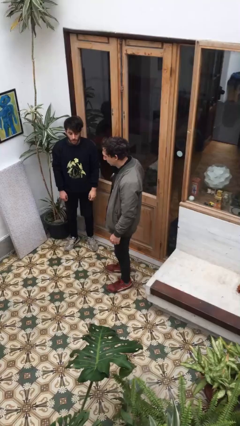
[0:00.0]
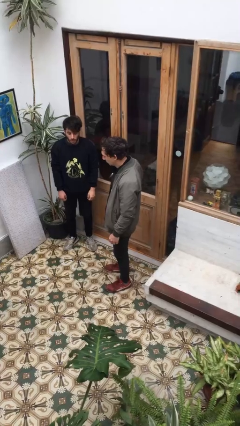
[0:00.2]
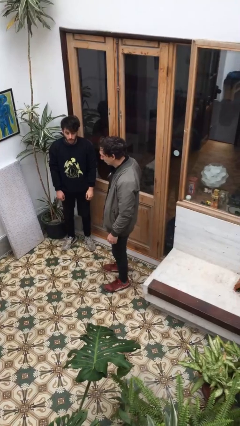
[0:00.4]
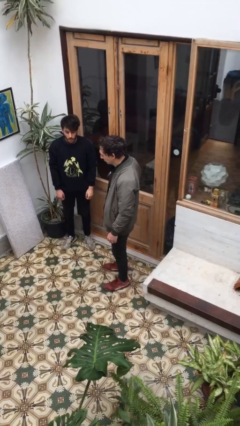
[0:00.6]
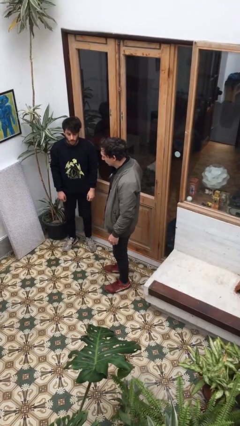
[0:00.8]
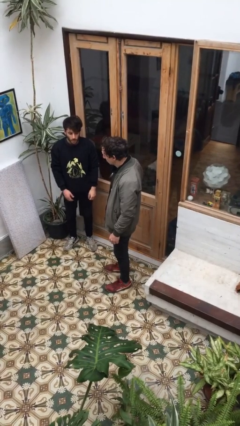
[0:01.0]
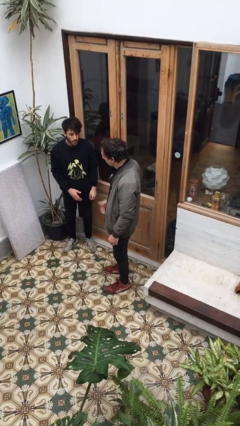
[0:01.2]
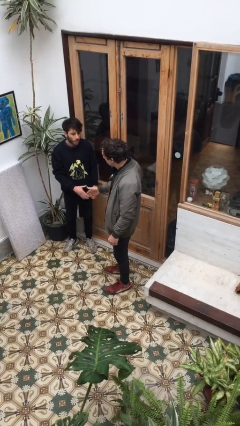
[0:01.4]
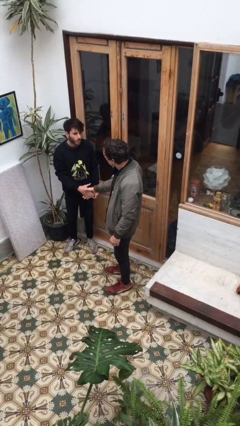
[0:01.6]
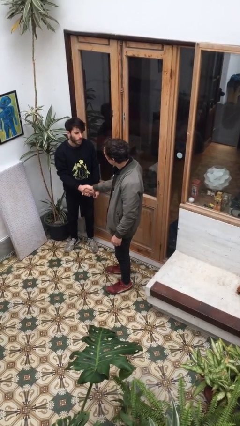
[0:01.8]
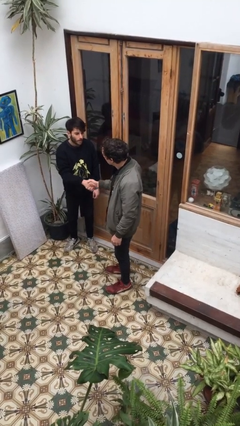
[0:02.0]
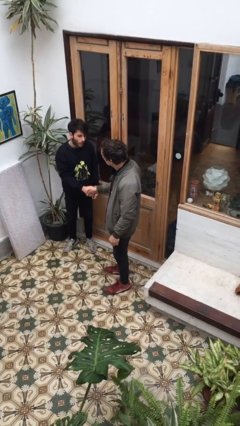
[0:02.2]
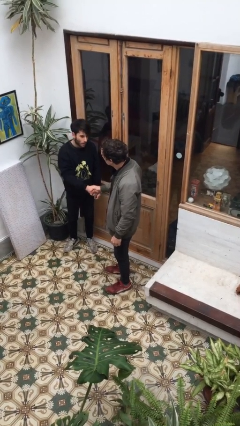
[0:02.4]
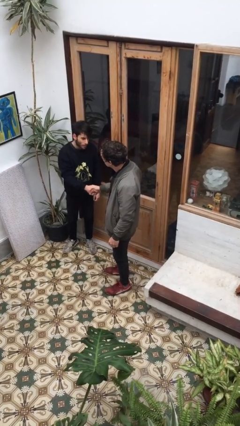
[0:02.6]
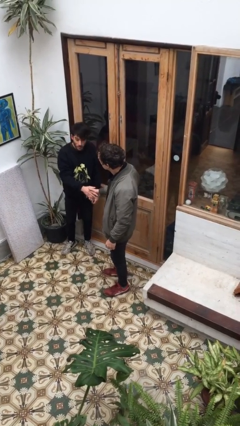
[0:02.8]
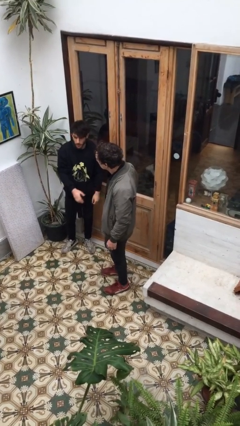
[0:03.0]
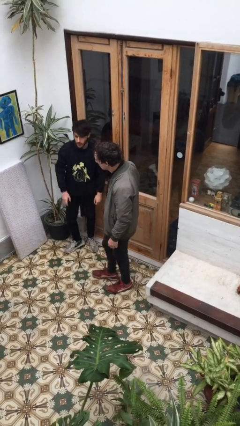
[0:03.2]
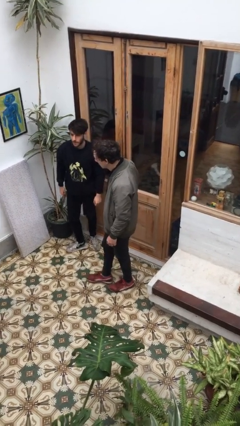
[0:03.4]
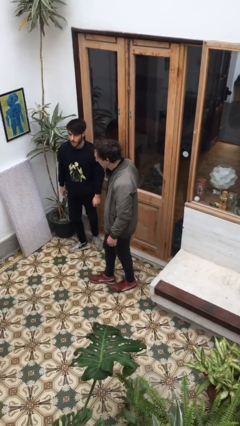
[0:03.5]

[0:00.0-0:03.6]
person shakes hand

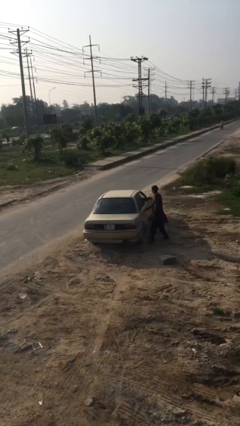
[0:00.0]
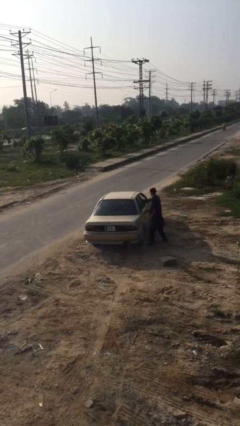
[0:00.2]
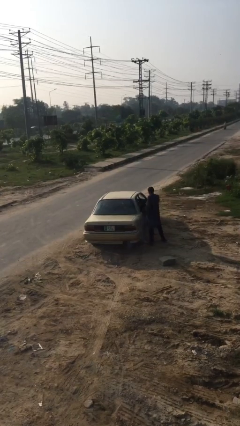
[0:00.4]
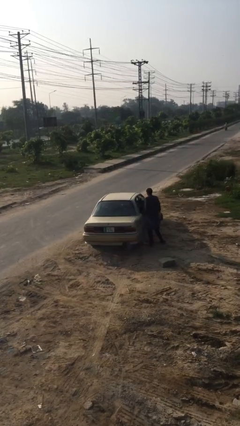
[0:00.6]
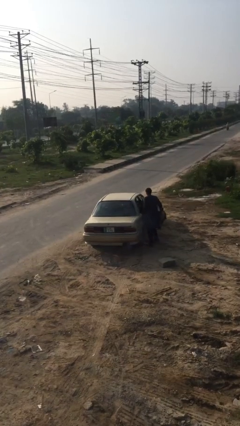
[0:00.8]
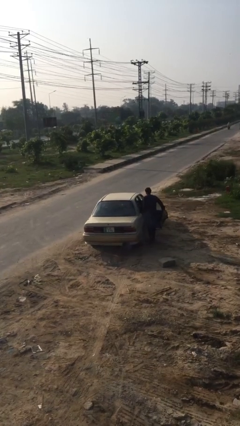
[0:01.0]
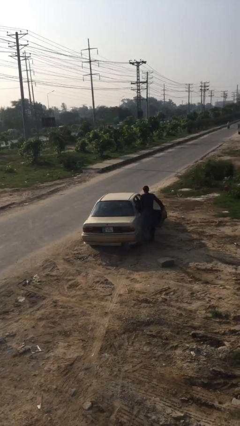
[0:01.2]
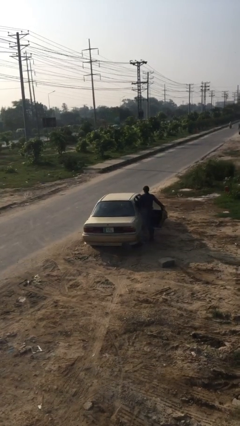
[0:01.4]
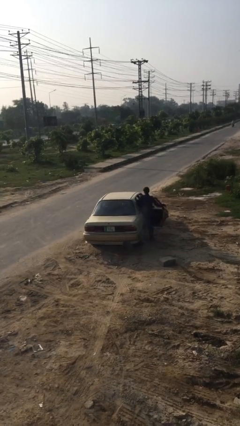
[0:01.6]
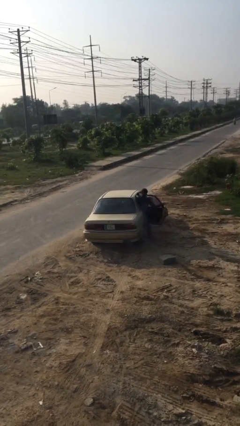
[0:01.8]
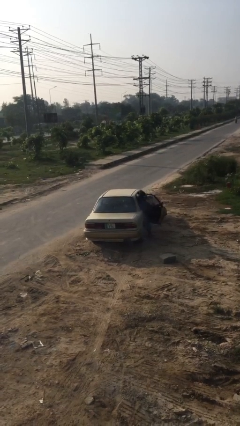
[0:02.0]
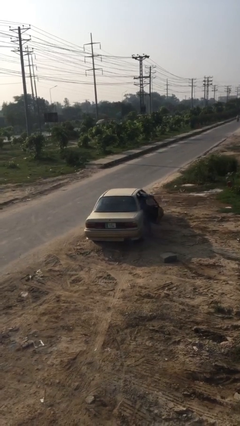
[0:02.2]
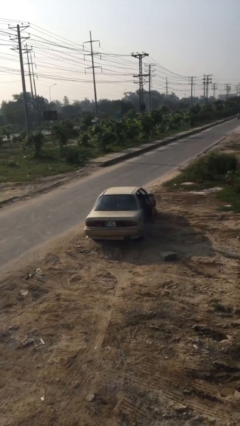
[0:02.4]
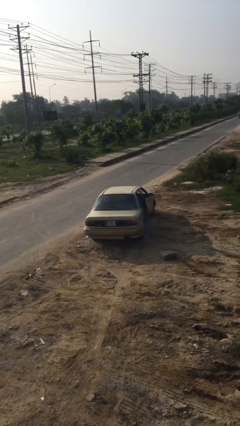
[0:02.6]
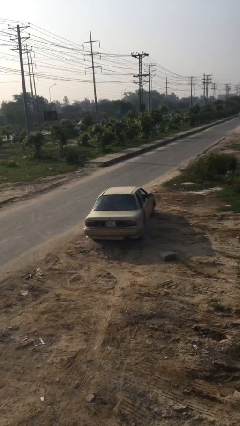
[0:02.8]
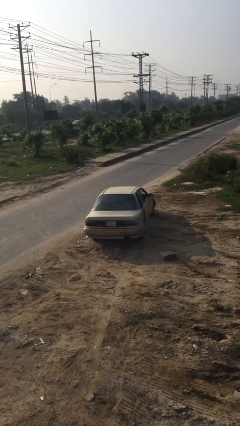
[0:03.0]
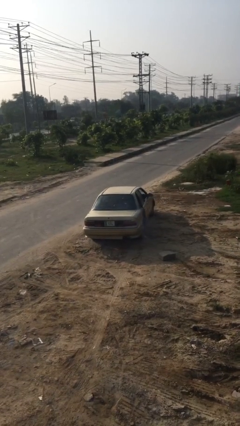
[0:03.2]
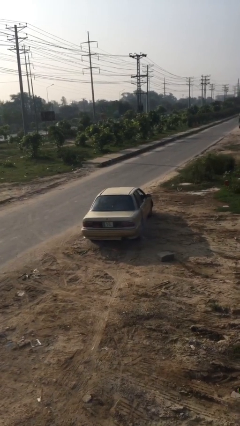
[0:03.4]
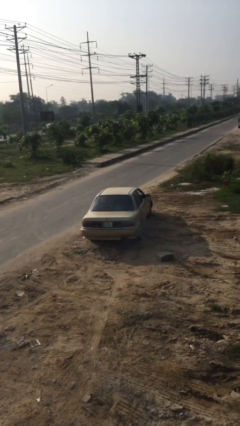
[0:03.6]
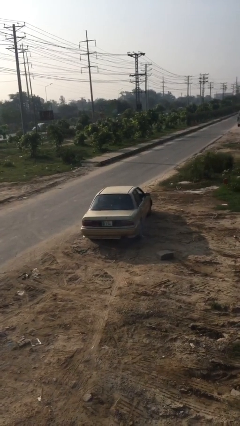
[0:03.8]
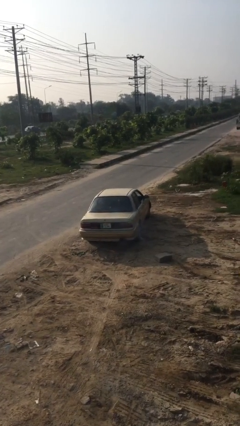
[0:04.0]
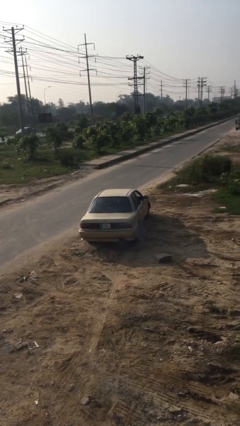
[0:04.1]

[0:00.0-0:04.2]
car picks up person

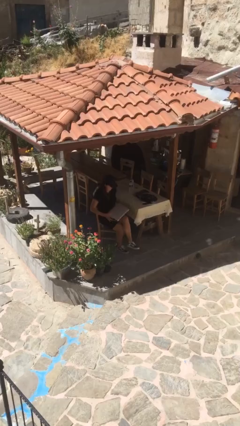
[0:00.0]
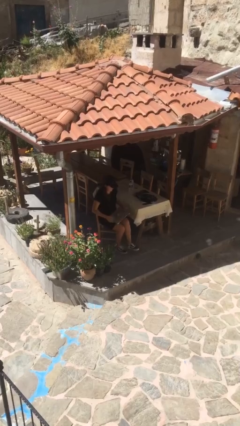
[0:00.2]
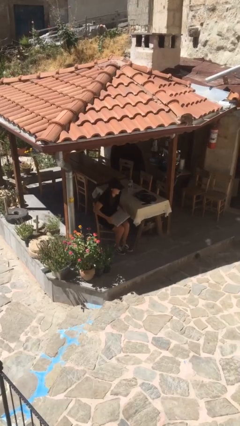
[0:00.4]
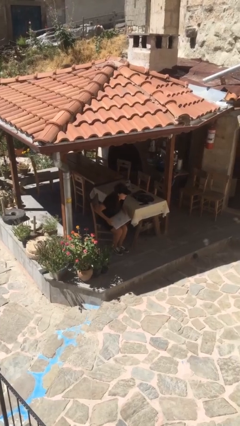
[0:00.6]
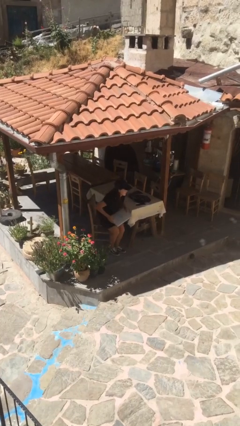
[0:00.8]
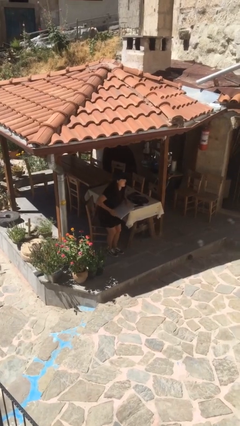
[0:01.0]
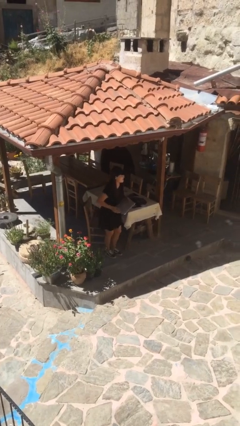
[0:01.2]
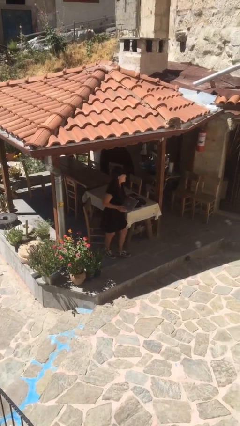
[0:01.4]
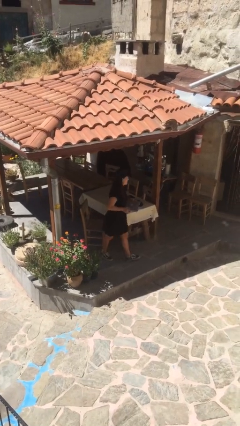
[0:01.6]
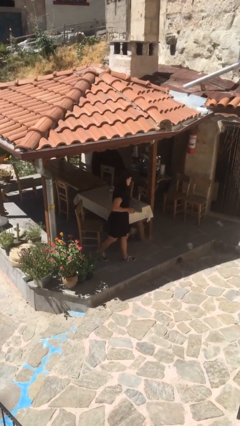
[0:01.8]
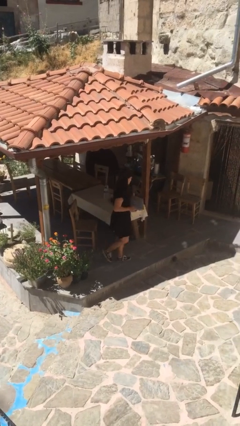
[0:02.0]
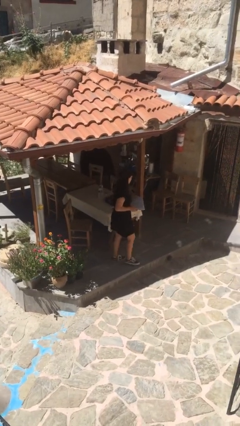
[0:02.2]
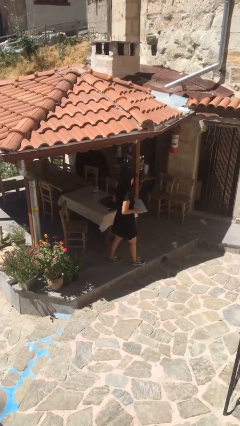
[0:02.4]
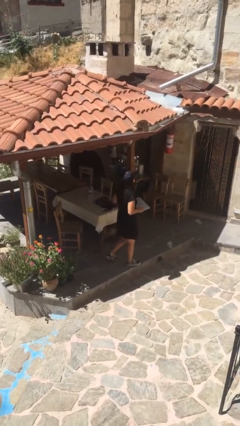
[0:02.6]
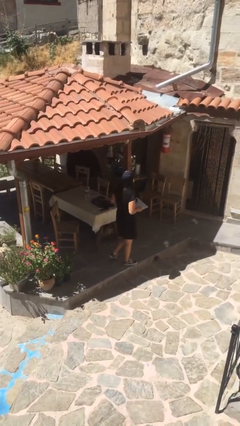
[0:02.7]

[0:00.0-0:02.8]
person stands up

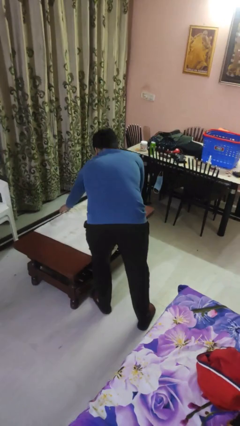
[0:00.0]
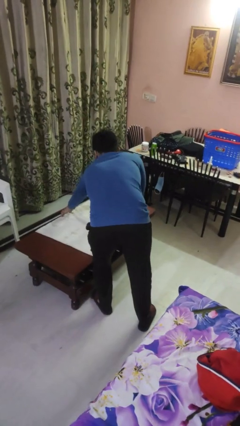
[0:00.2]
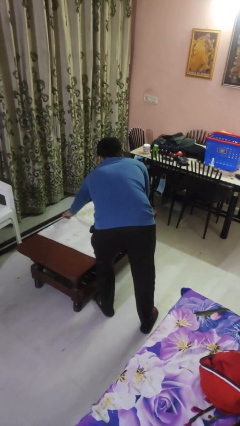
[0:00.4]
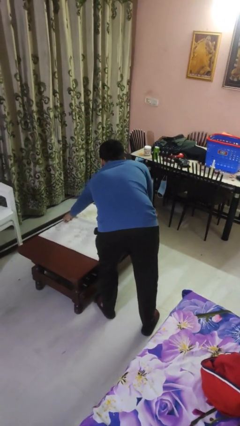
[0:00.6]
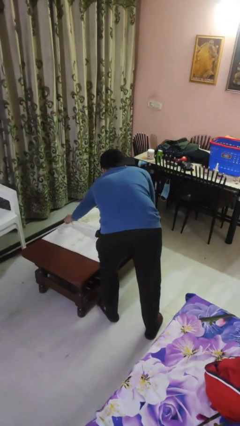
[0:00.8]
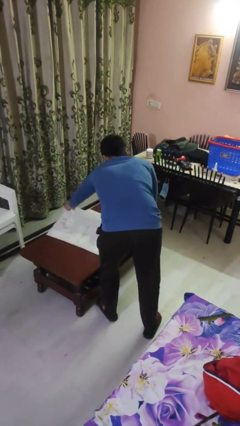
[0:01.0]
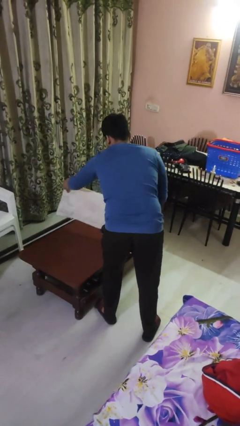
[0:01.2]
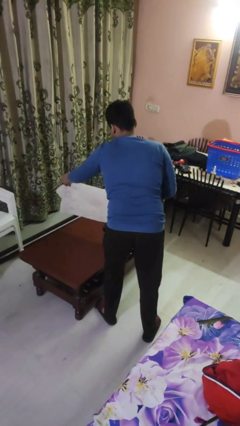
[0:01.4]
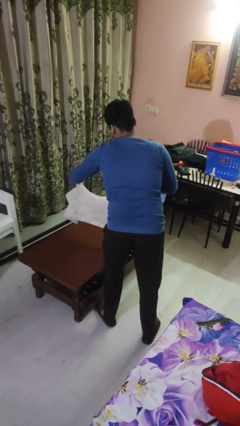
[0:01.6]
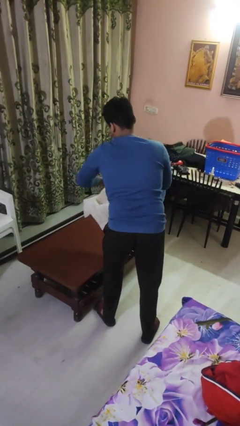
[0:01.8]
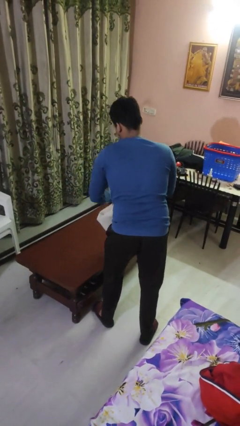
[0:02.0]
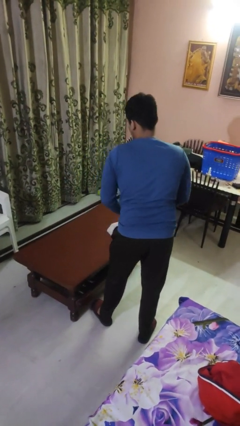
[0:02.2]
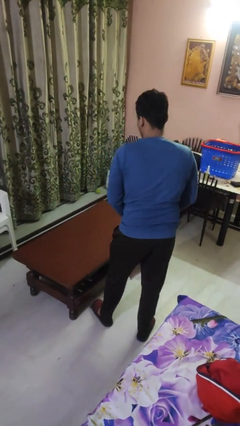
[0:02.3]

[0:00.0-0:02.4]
person folds tablecloth

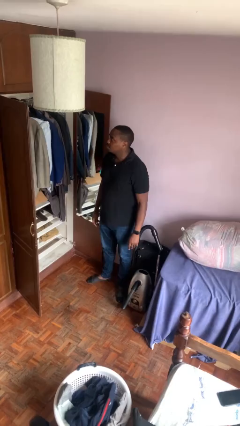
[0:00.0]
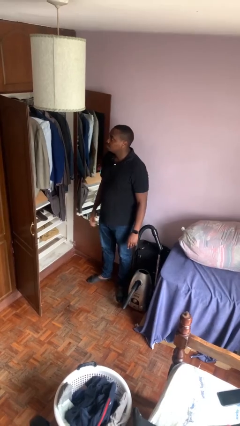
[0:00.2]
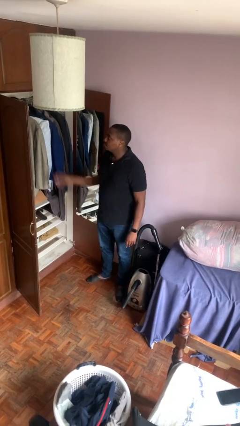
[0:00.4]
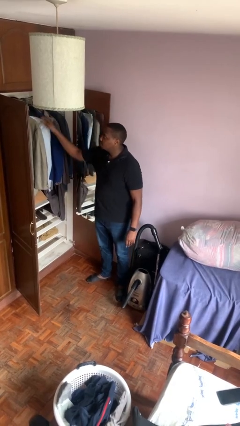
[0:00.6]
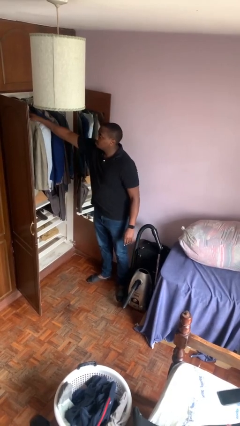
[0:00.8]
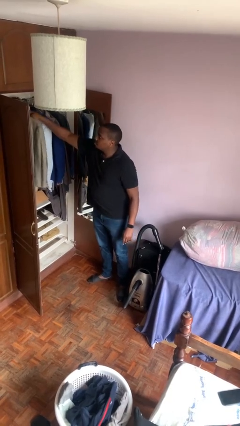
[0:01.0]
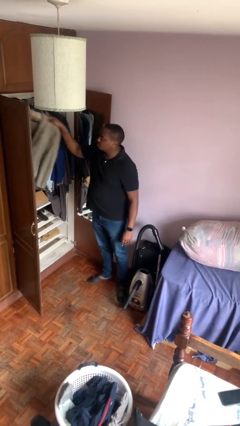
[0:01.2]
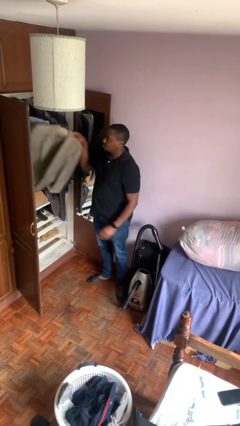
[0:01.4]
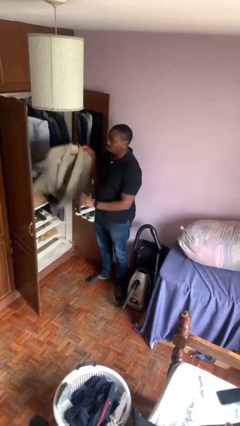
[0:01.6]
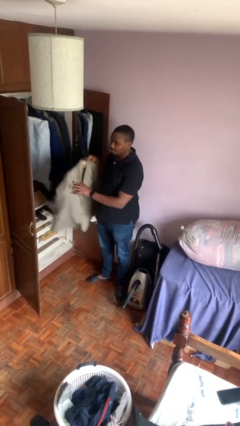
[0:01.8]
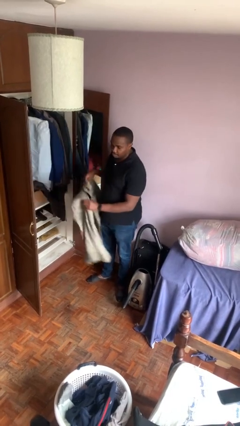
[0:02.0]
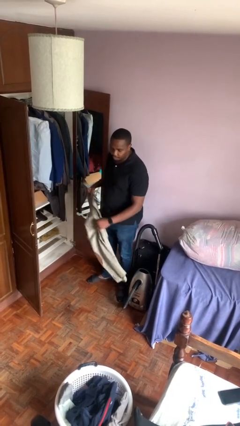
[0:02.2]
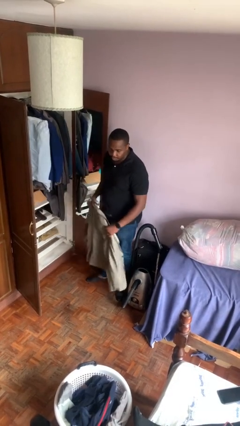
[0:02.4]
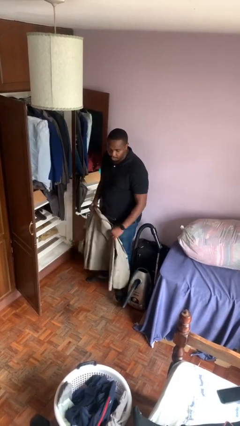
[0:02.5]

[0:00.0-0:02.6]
person takes clothes from closet

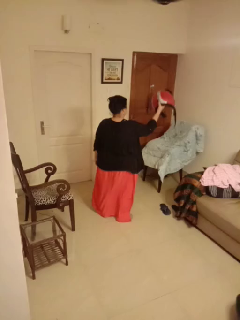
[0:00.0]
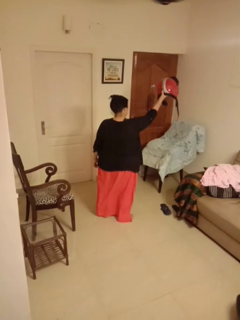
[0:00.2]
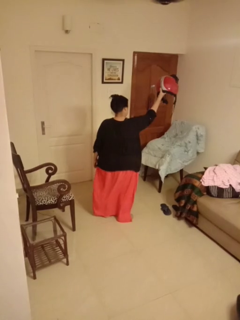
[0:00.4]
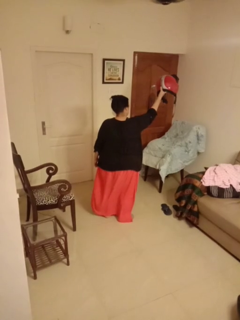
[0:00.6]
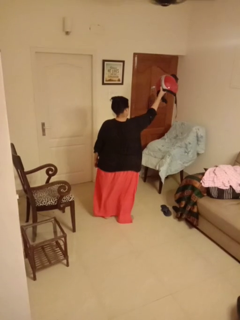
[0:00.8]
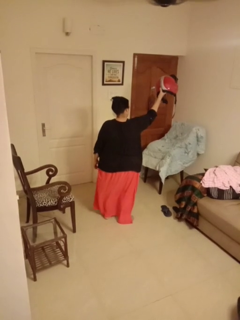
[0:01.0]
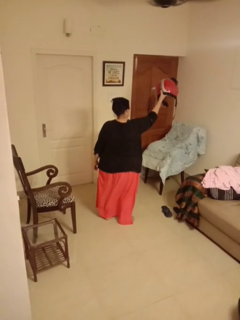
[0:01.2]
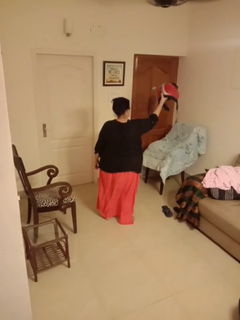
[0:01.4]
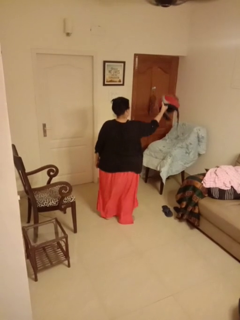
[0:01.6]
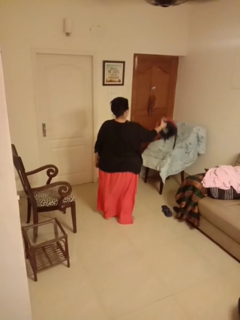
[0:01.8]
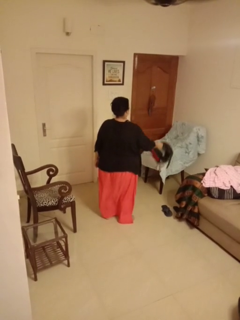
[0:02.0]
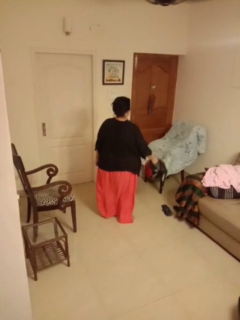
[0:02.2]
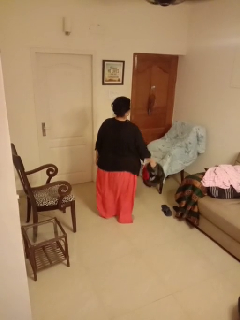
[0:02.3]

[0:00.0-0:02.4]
person holds object above head

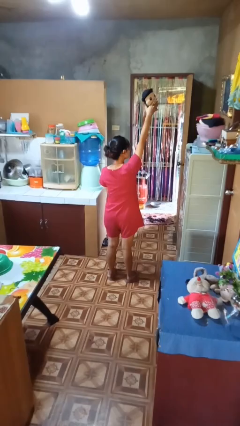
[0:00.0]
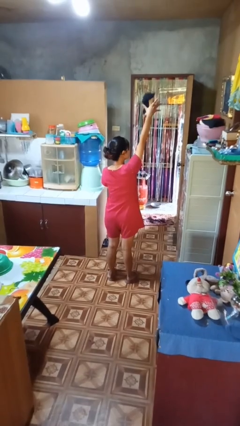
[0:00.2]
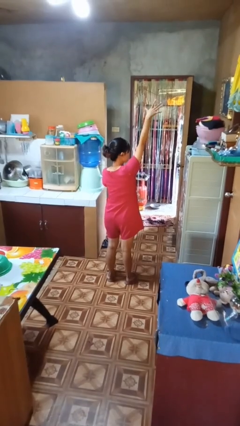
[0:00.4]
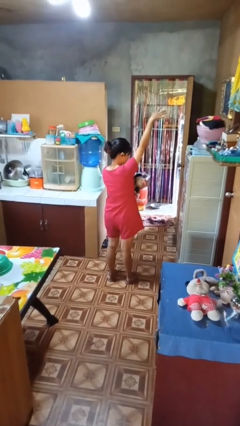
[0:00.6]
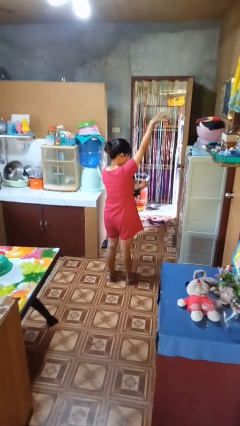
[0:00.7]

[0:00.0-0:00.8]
person drops object
